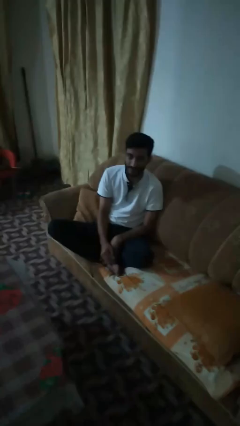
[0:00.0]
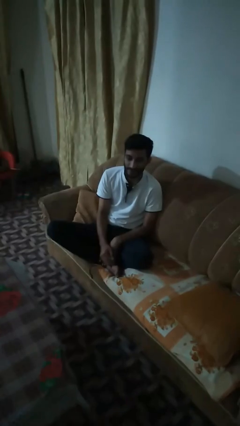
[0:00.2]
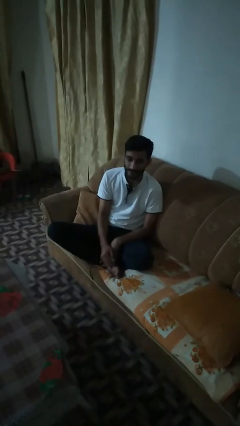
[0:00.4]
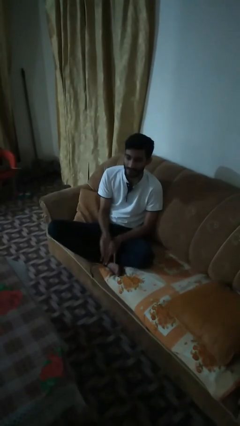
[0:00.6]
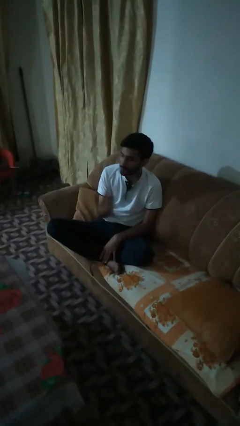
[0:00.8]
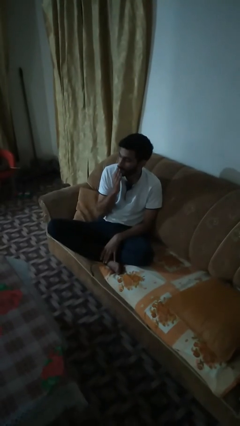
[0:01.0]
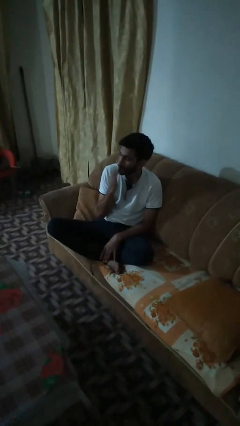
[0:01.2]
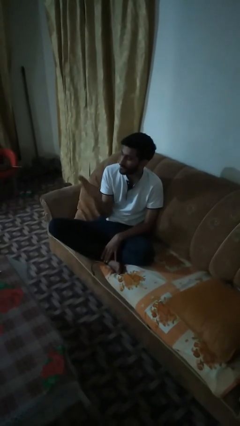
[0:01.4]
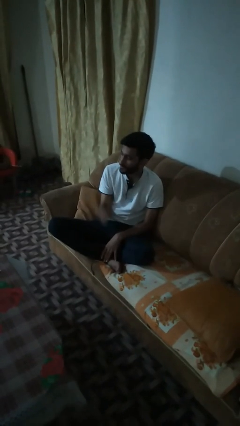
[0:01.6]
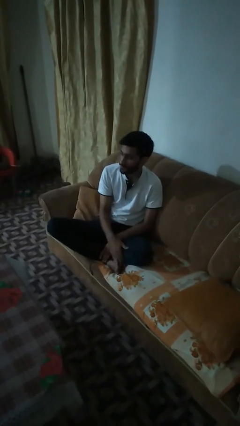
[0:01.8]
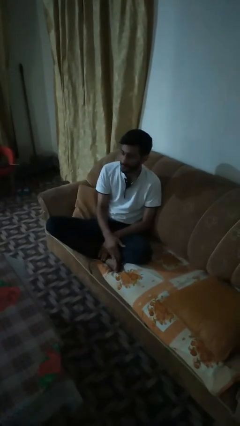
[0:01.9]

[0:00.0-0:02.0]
person gestures blow kiss

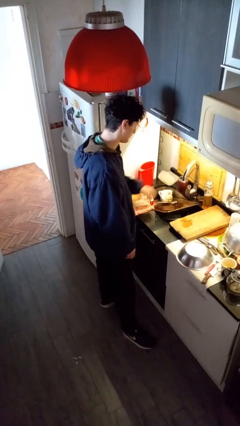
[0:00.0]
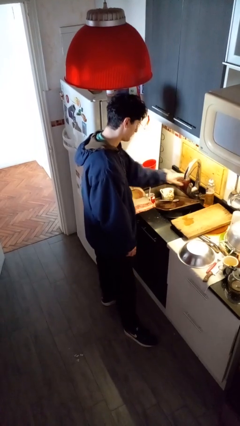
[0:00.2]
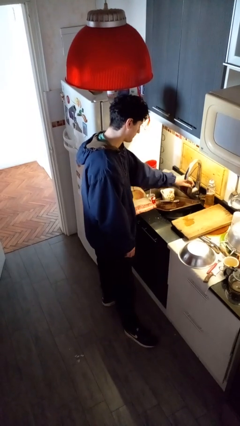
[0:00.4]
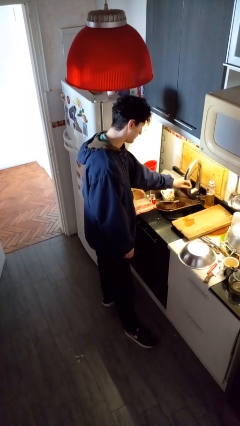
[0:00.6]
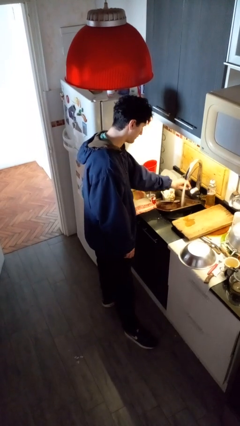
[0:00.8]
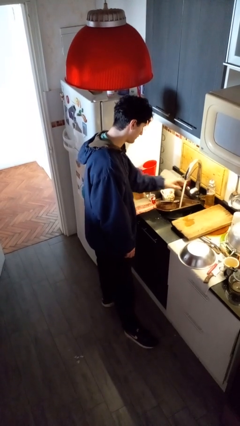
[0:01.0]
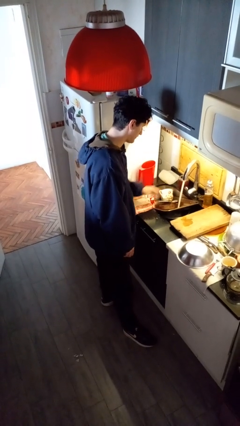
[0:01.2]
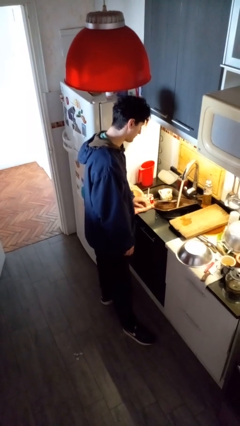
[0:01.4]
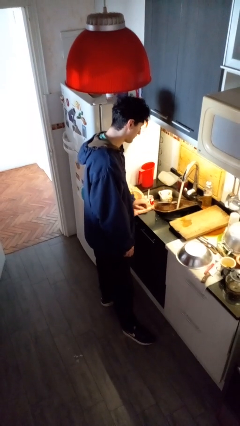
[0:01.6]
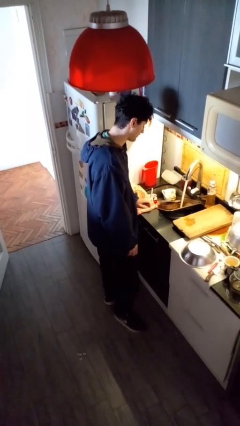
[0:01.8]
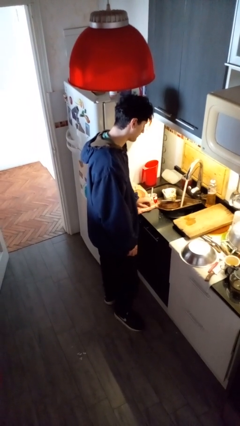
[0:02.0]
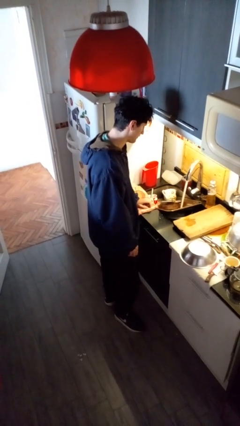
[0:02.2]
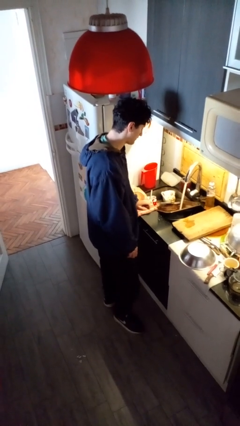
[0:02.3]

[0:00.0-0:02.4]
person turns on faucet

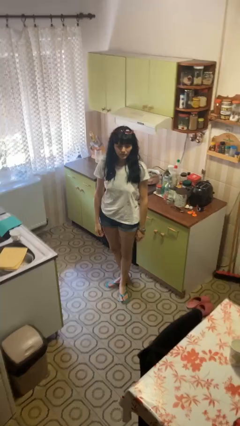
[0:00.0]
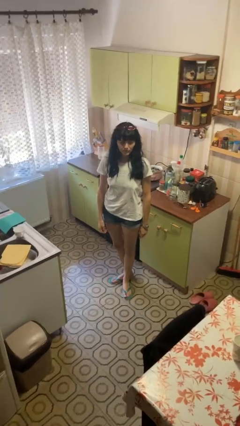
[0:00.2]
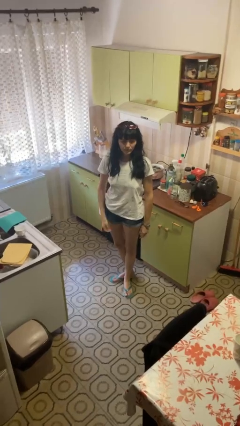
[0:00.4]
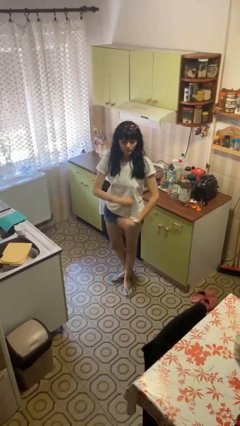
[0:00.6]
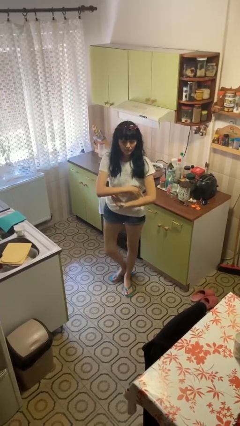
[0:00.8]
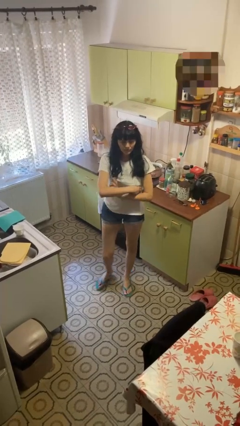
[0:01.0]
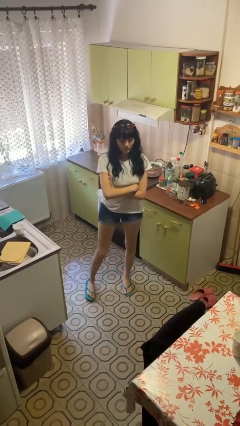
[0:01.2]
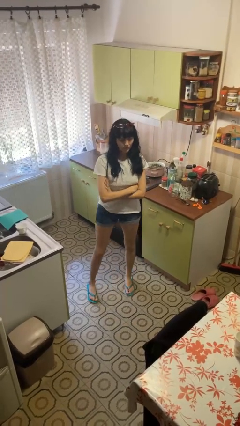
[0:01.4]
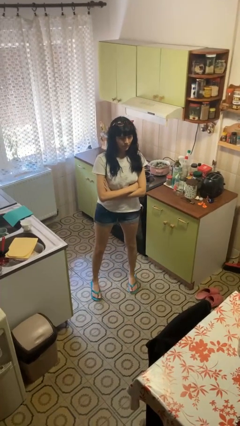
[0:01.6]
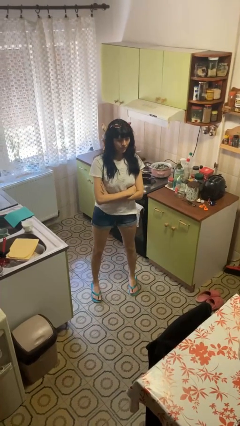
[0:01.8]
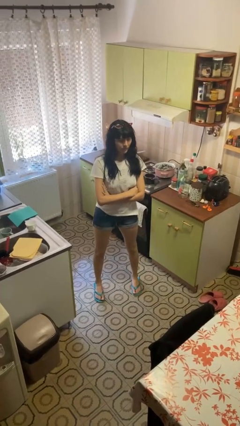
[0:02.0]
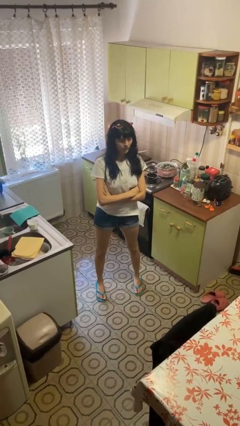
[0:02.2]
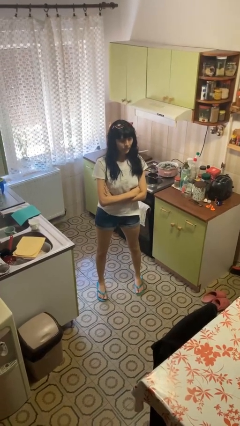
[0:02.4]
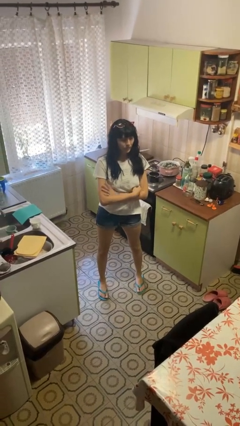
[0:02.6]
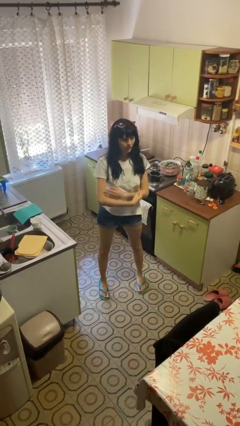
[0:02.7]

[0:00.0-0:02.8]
person crosses arms

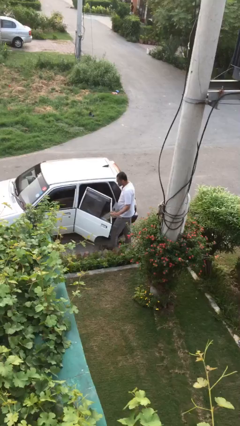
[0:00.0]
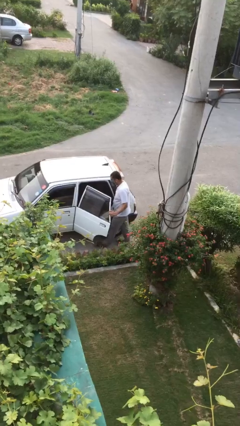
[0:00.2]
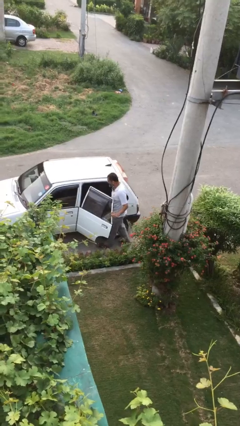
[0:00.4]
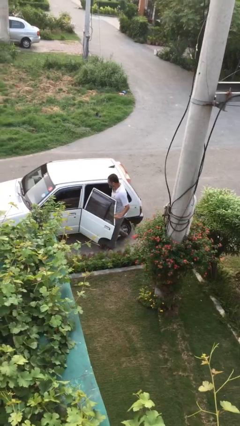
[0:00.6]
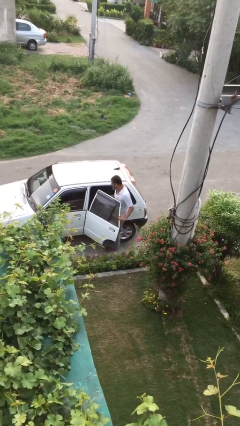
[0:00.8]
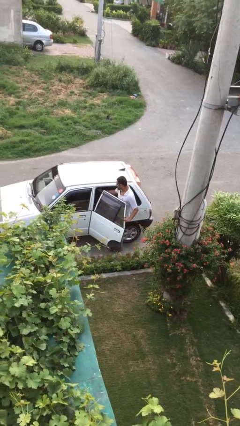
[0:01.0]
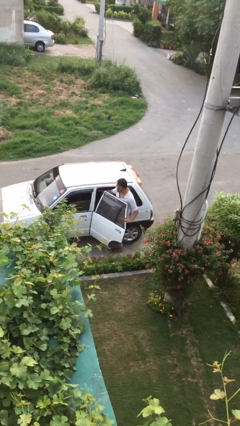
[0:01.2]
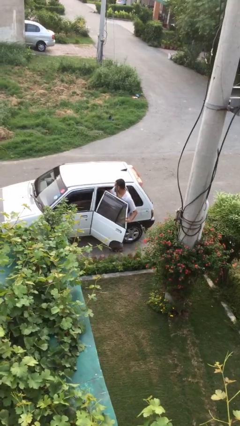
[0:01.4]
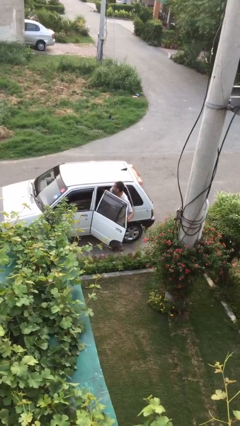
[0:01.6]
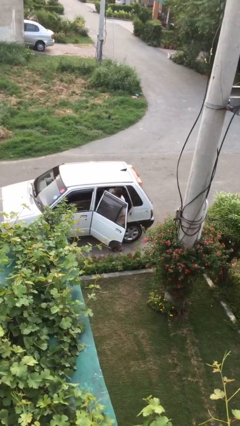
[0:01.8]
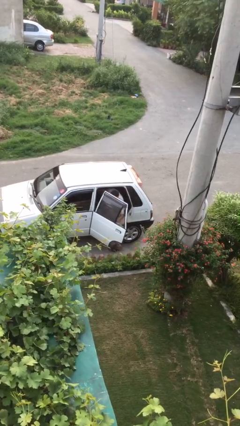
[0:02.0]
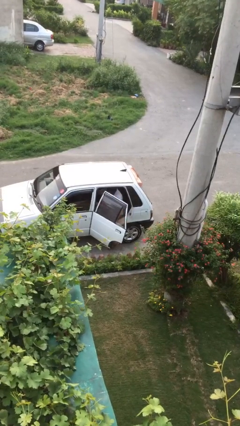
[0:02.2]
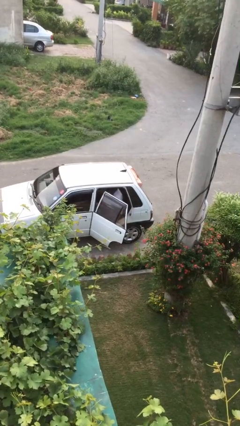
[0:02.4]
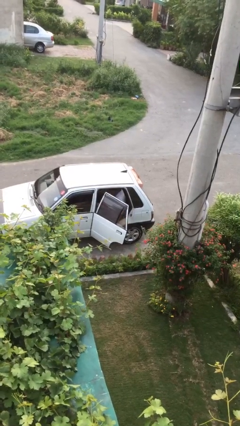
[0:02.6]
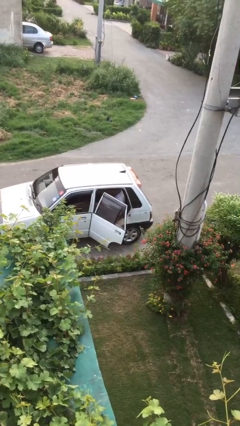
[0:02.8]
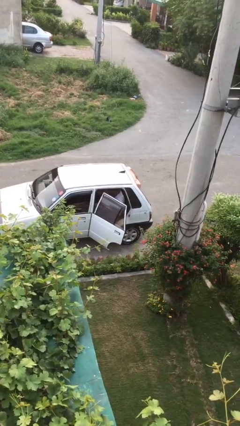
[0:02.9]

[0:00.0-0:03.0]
person enters car

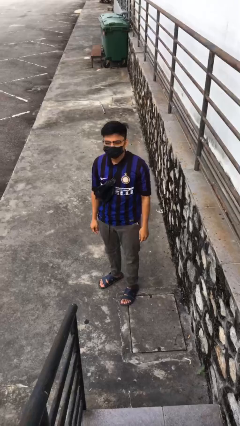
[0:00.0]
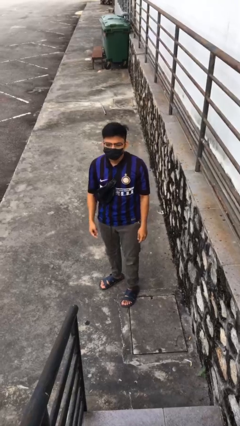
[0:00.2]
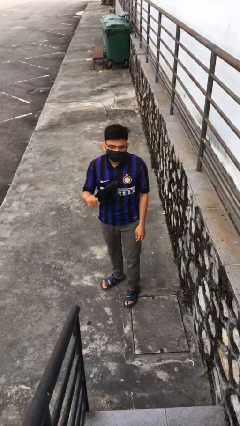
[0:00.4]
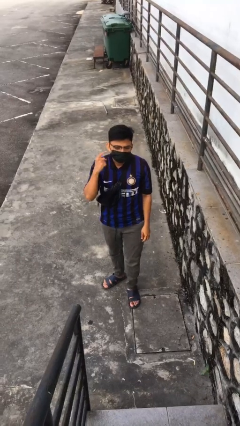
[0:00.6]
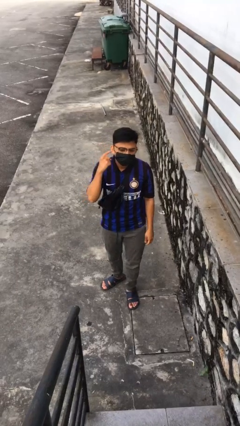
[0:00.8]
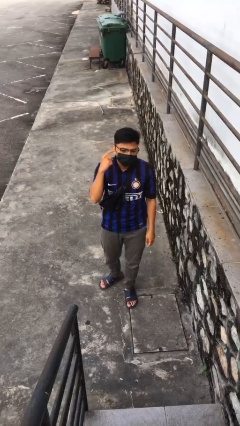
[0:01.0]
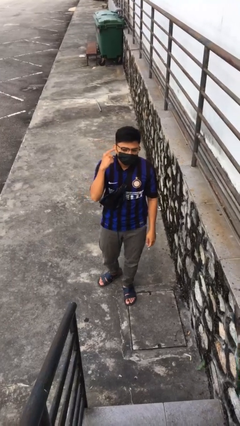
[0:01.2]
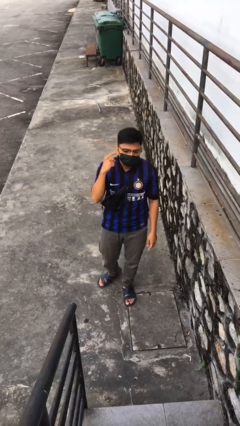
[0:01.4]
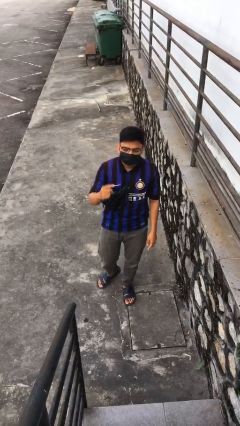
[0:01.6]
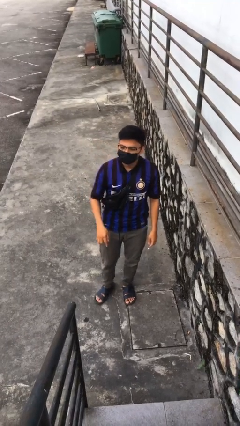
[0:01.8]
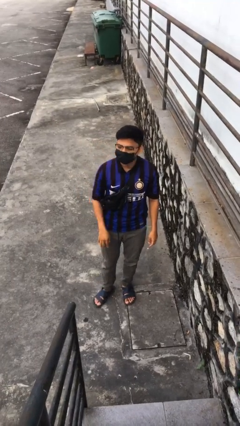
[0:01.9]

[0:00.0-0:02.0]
person gestures listen closely

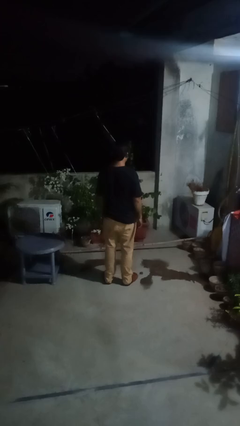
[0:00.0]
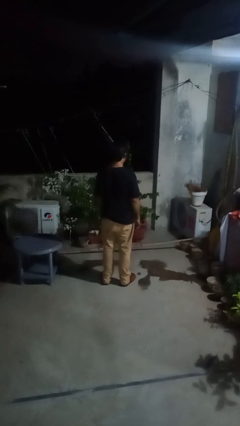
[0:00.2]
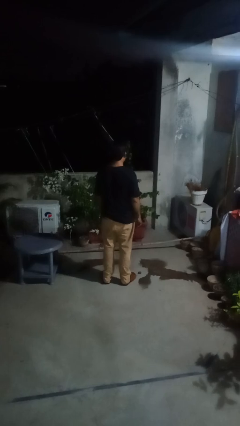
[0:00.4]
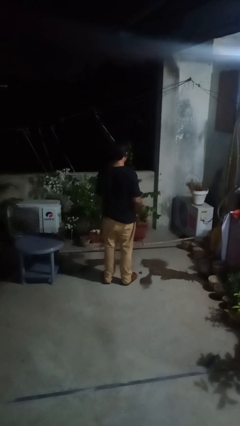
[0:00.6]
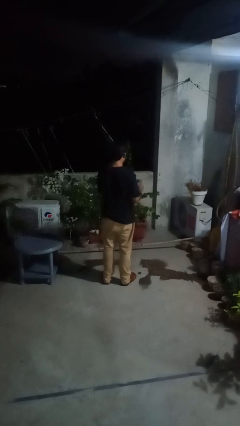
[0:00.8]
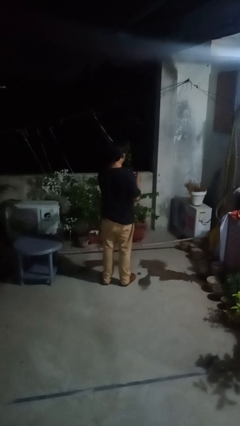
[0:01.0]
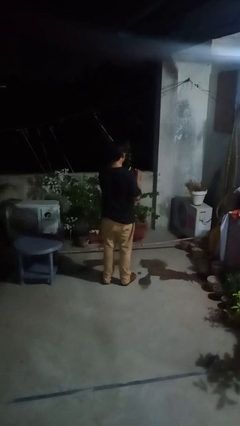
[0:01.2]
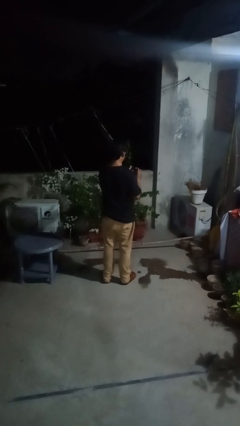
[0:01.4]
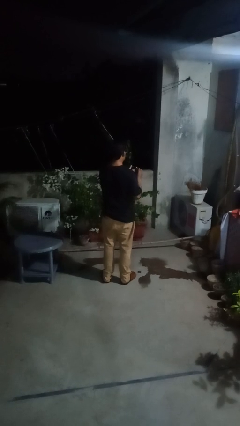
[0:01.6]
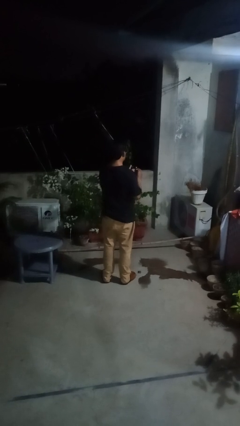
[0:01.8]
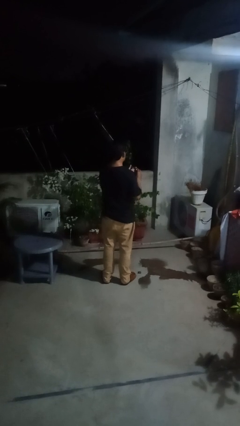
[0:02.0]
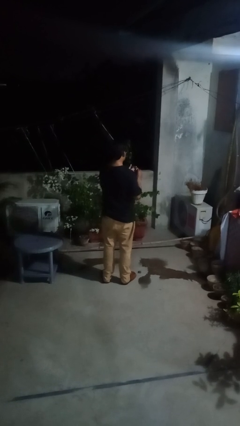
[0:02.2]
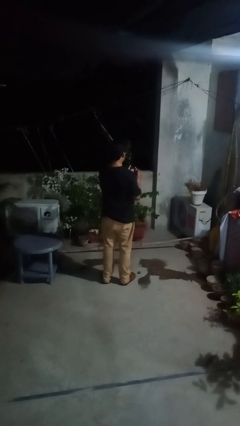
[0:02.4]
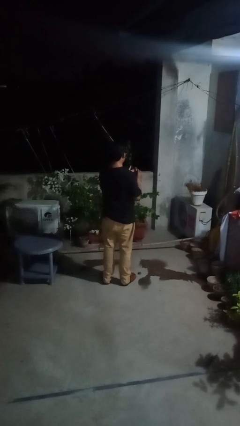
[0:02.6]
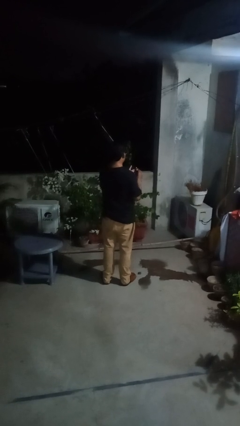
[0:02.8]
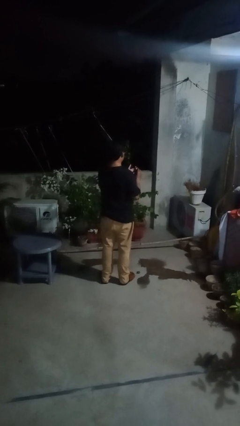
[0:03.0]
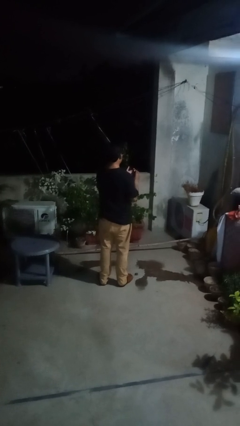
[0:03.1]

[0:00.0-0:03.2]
person clips fingernails

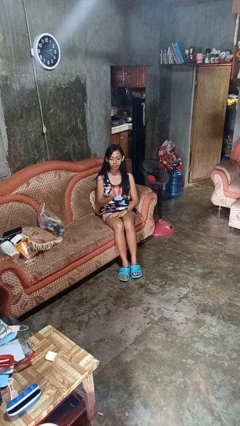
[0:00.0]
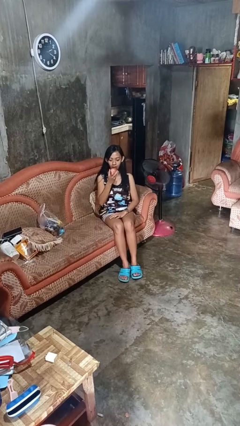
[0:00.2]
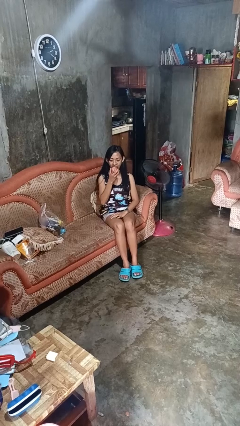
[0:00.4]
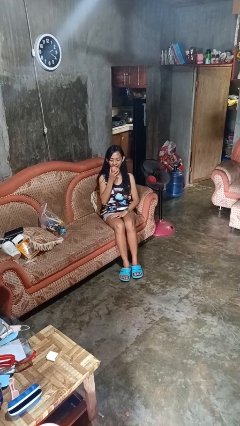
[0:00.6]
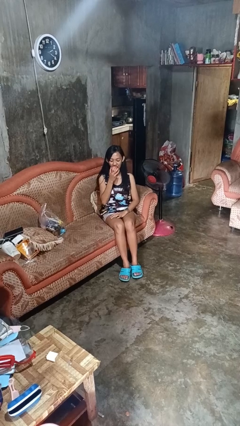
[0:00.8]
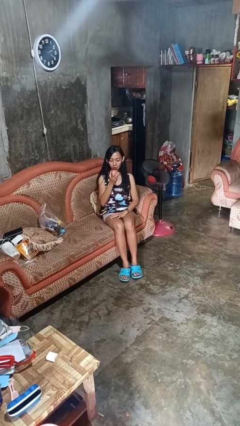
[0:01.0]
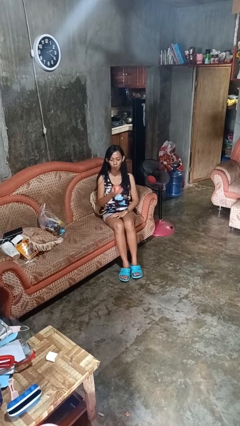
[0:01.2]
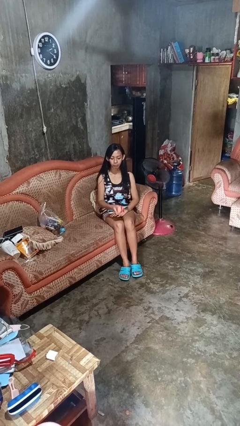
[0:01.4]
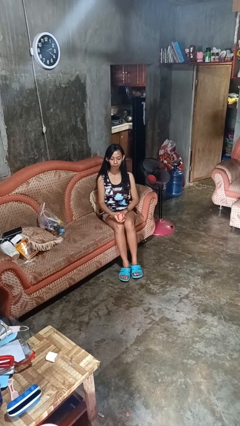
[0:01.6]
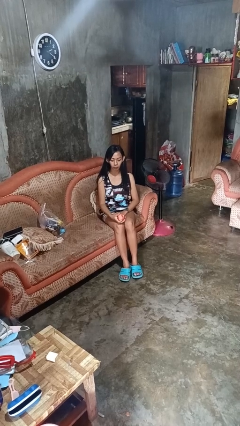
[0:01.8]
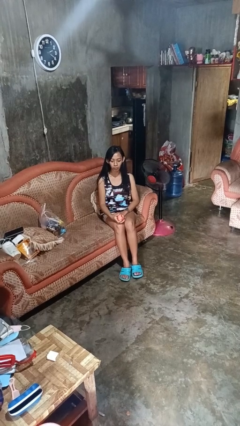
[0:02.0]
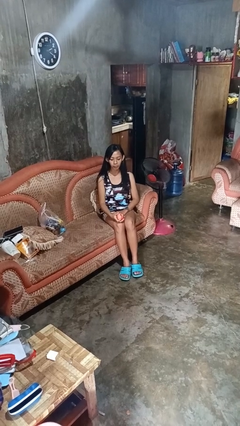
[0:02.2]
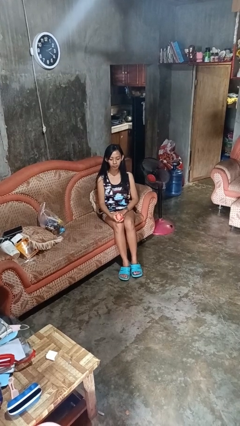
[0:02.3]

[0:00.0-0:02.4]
person eats apple
